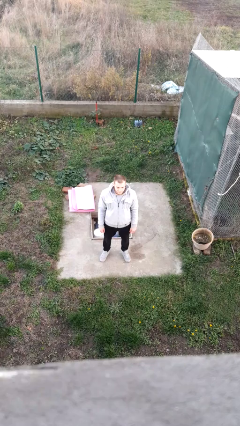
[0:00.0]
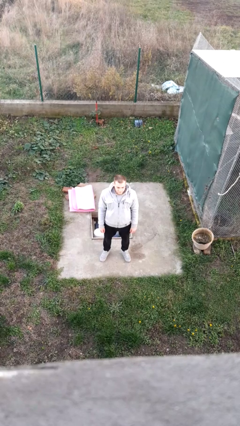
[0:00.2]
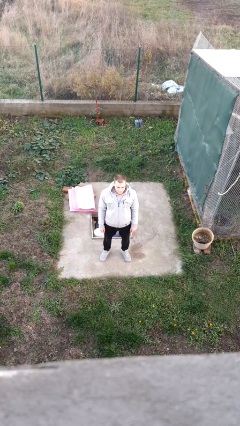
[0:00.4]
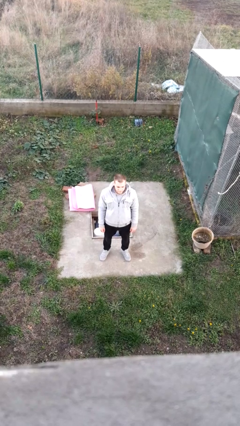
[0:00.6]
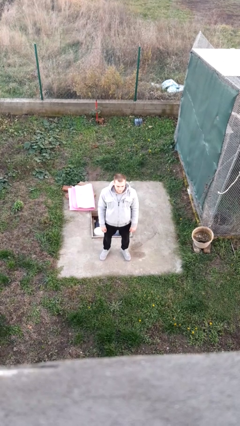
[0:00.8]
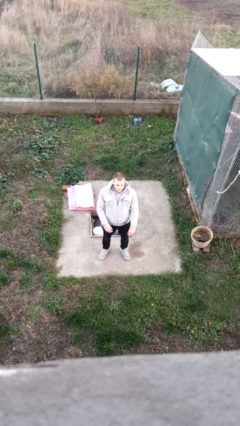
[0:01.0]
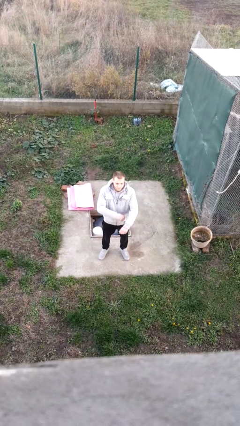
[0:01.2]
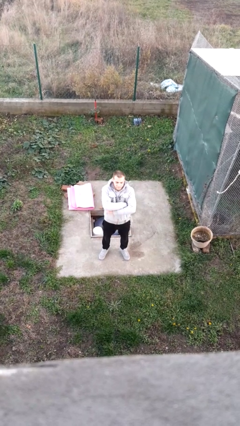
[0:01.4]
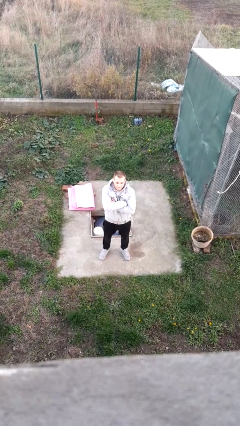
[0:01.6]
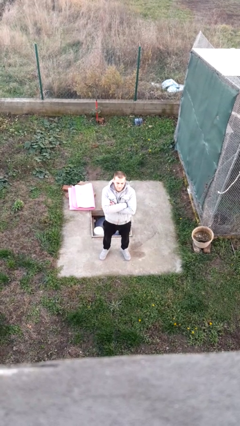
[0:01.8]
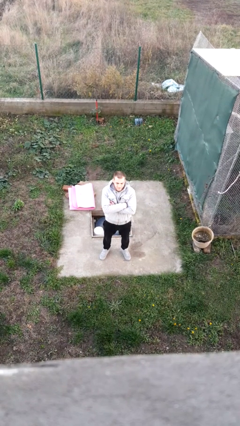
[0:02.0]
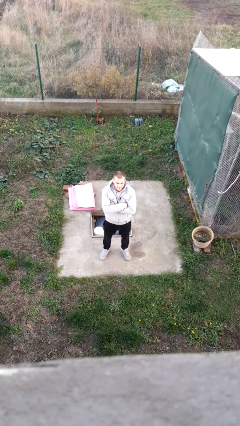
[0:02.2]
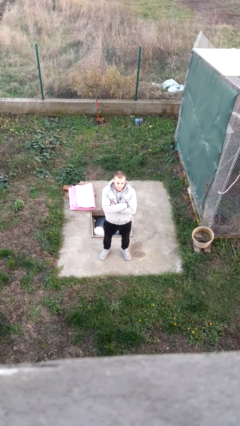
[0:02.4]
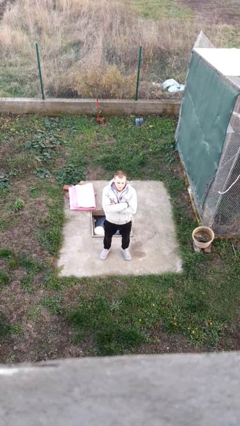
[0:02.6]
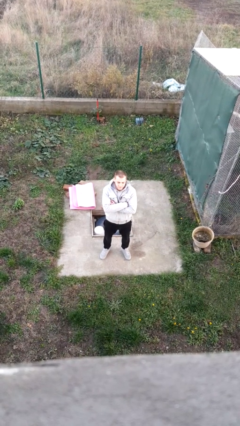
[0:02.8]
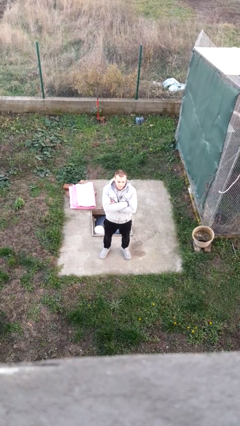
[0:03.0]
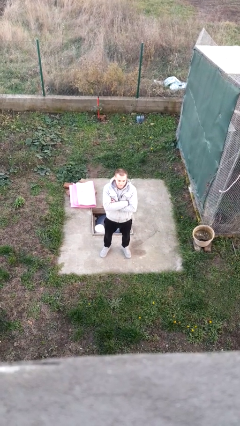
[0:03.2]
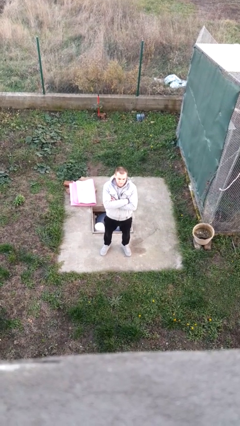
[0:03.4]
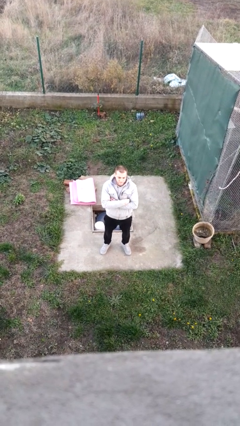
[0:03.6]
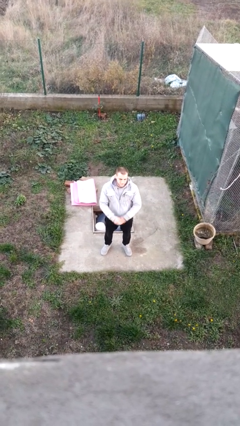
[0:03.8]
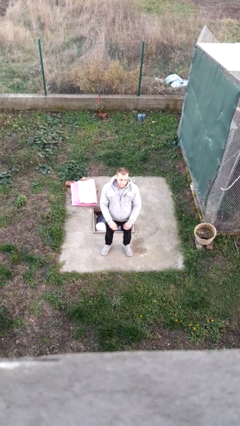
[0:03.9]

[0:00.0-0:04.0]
person crosses arms

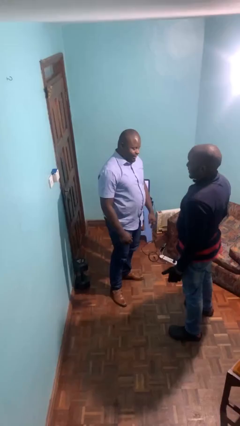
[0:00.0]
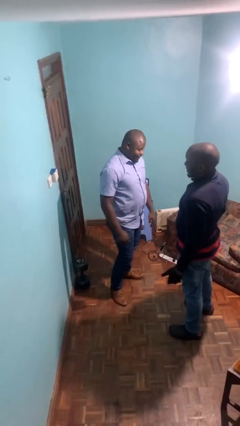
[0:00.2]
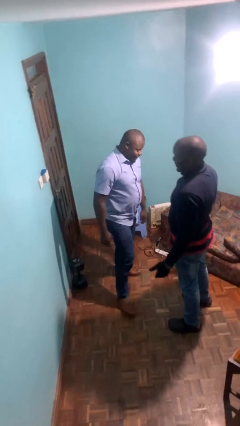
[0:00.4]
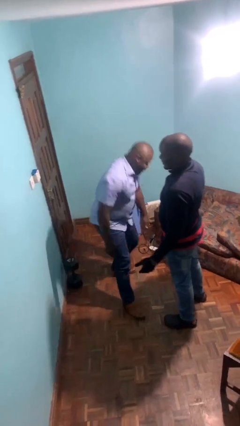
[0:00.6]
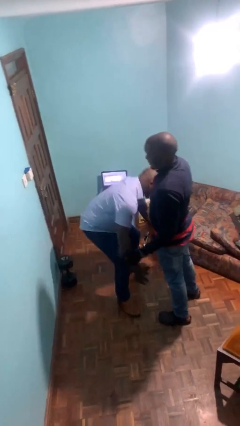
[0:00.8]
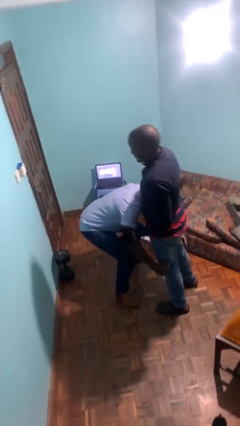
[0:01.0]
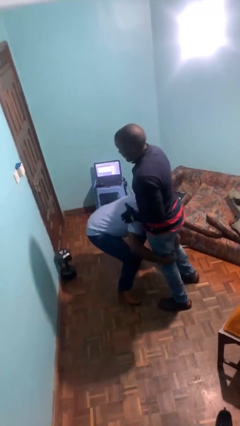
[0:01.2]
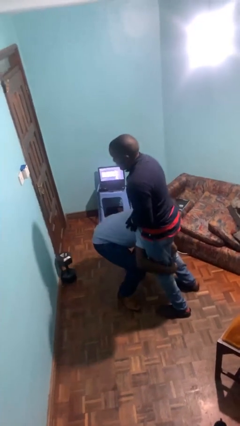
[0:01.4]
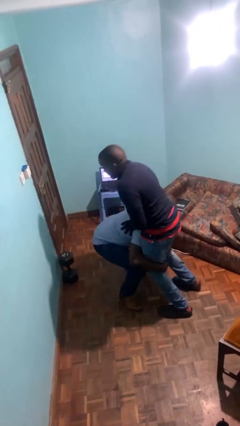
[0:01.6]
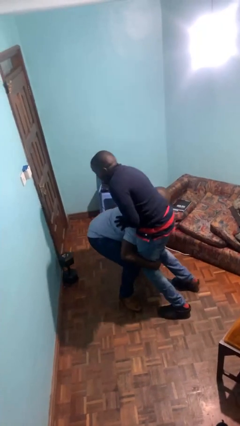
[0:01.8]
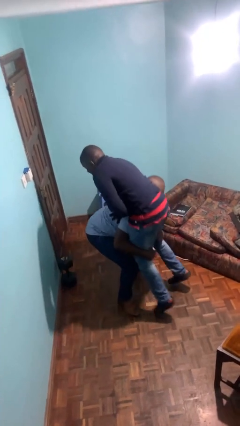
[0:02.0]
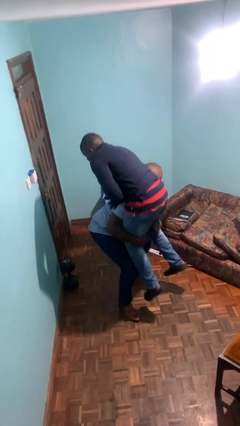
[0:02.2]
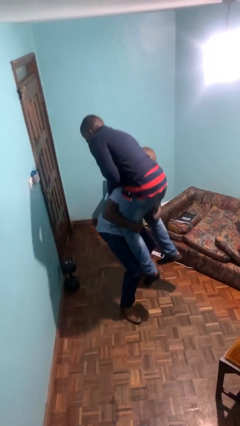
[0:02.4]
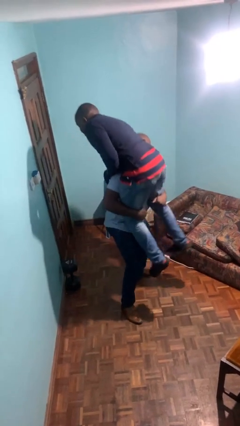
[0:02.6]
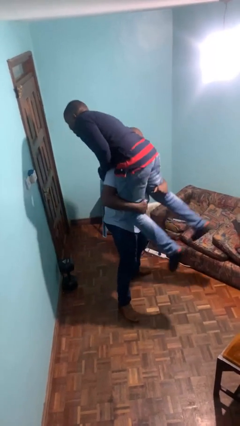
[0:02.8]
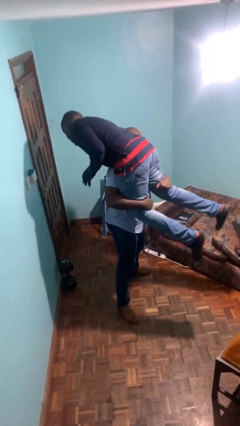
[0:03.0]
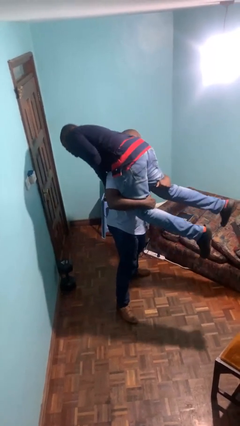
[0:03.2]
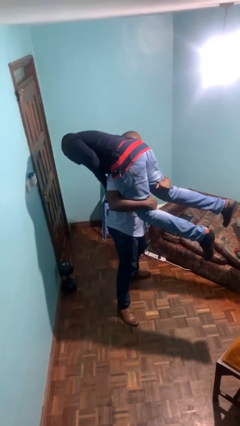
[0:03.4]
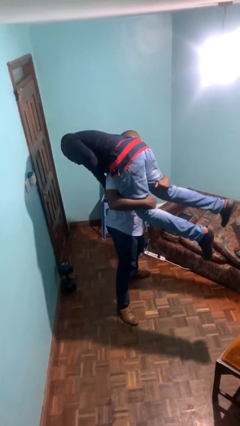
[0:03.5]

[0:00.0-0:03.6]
person carries person over shoulder

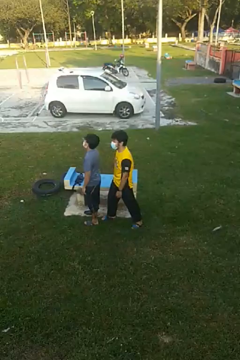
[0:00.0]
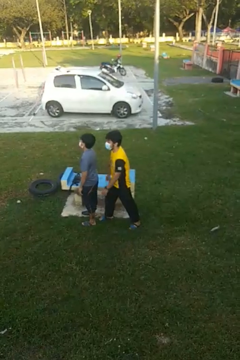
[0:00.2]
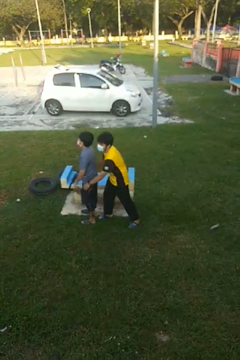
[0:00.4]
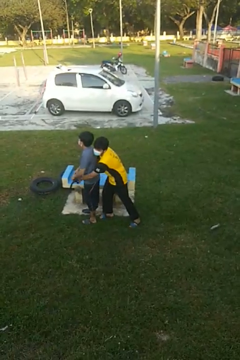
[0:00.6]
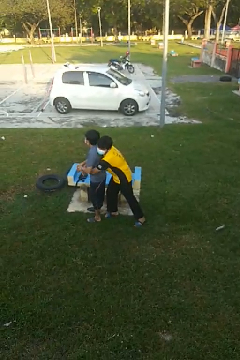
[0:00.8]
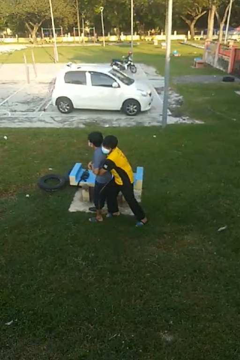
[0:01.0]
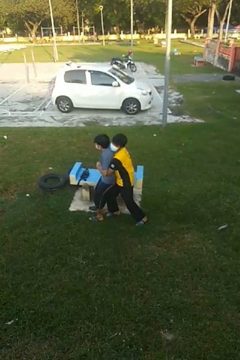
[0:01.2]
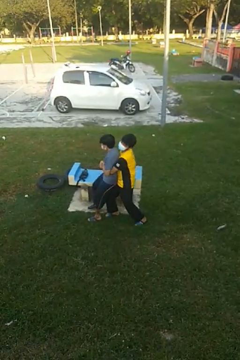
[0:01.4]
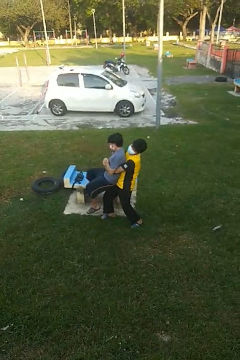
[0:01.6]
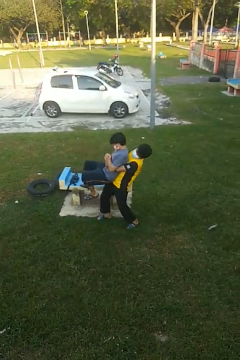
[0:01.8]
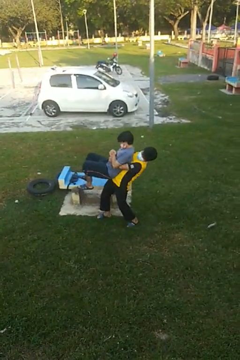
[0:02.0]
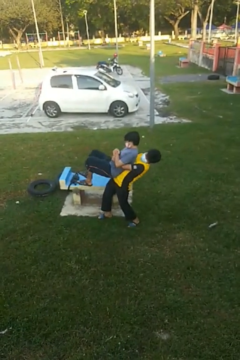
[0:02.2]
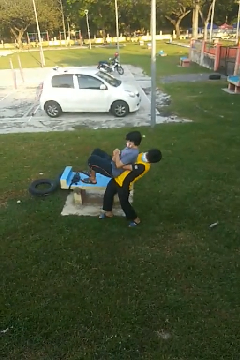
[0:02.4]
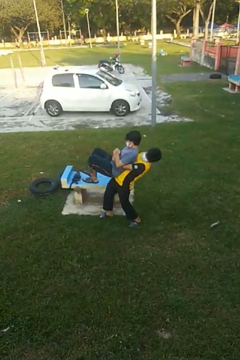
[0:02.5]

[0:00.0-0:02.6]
person picks up person

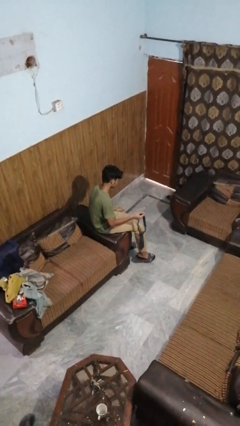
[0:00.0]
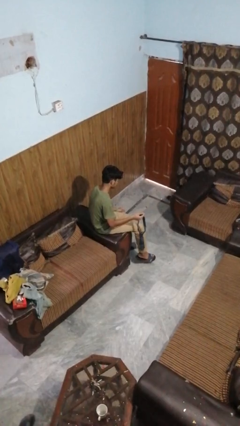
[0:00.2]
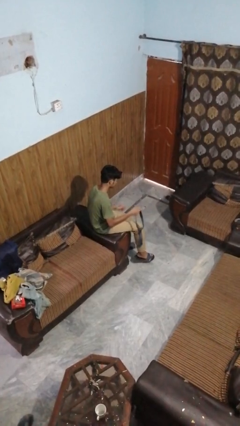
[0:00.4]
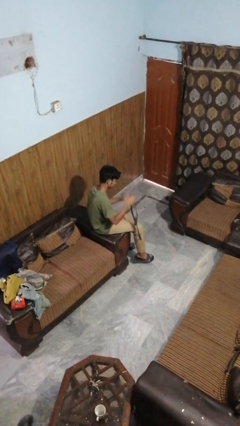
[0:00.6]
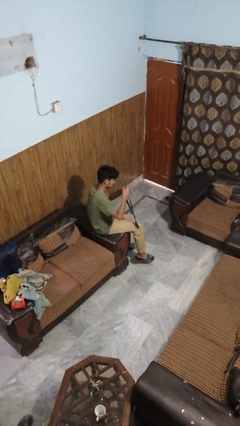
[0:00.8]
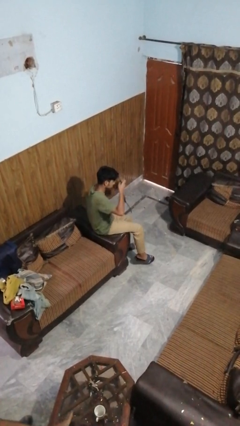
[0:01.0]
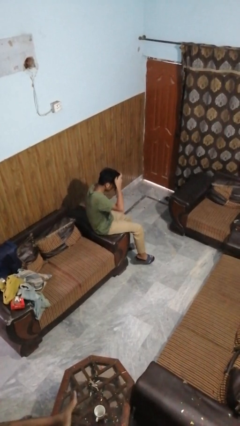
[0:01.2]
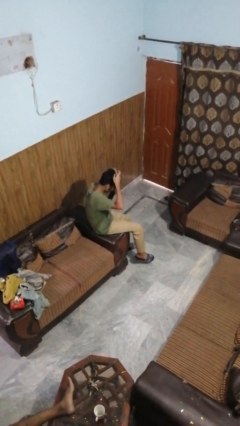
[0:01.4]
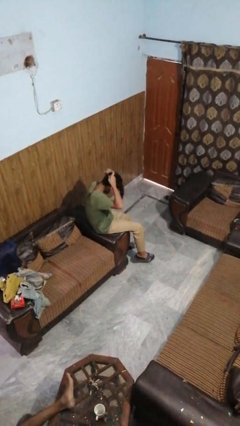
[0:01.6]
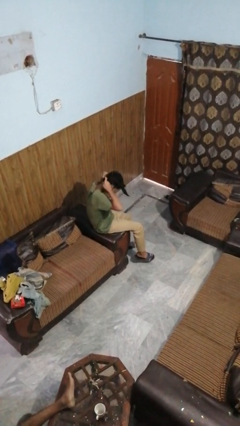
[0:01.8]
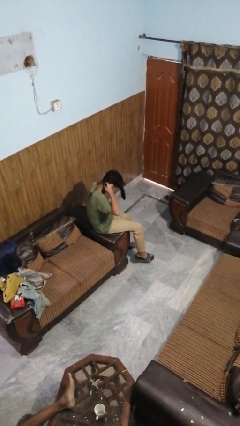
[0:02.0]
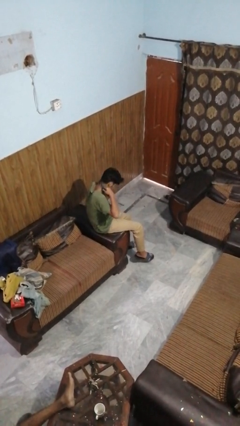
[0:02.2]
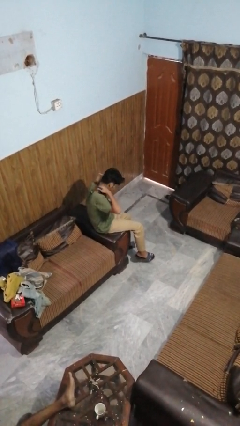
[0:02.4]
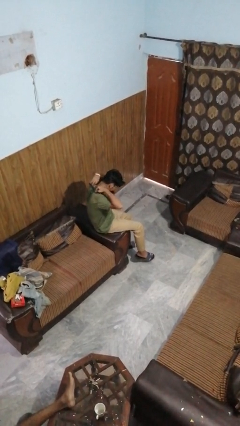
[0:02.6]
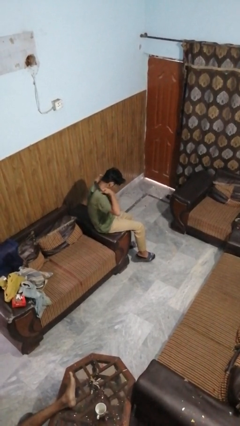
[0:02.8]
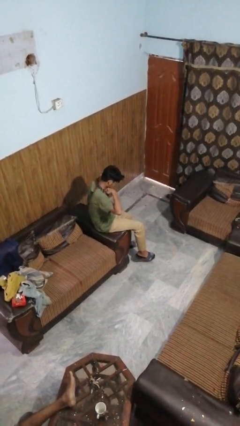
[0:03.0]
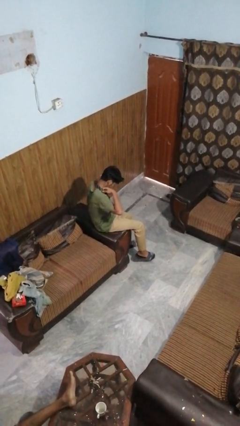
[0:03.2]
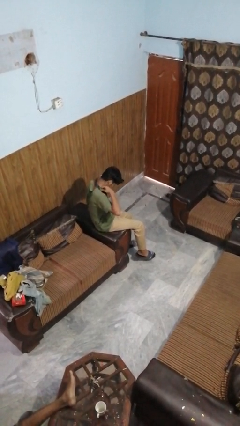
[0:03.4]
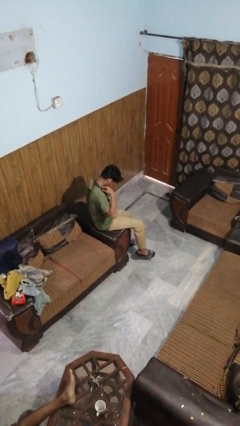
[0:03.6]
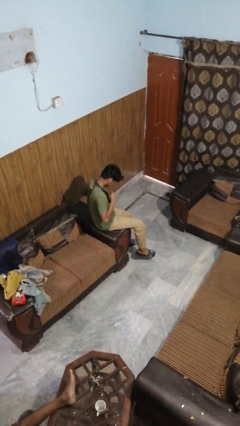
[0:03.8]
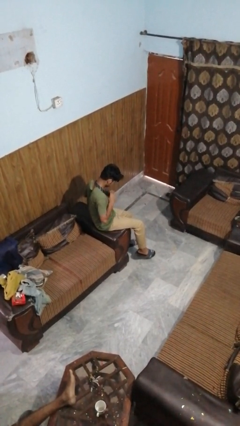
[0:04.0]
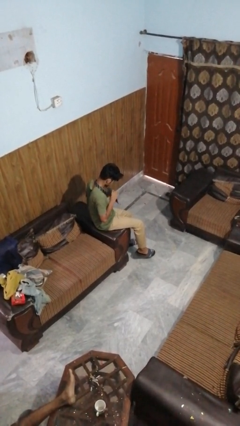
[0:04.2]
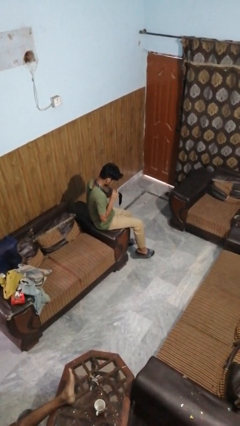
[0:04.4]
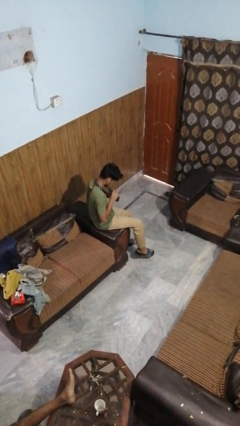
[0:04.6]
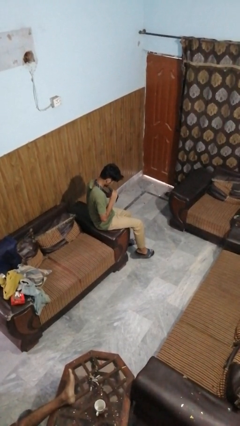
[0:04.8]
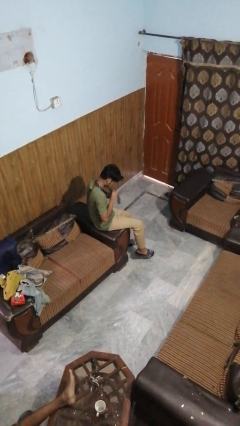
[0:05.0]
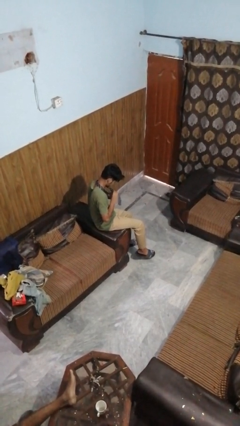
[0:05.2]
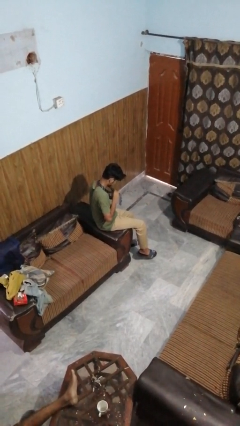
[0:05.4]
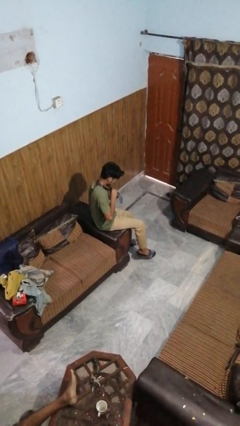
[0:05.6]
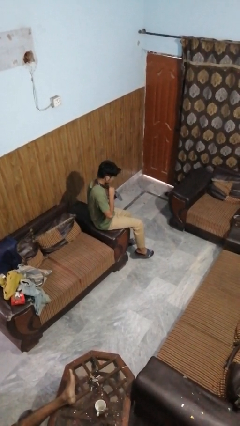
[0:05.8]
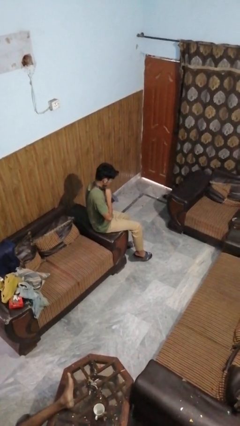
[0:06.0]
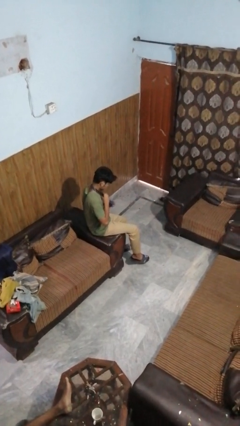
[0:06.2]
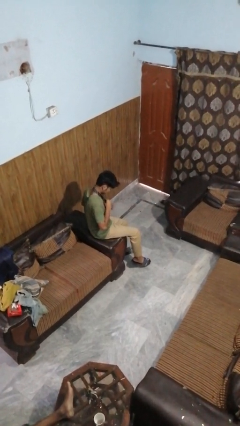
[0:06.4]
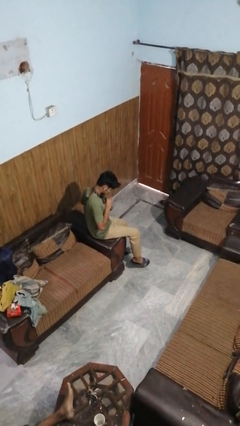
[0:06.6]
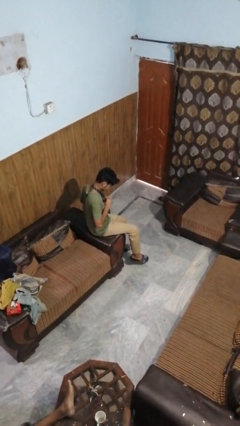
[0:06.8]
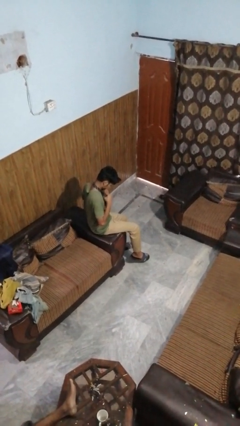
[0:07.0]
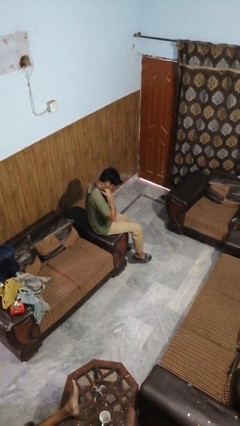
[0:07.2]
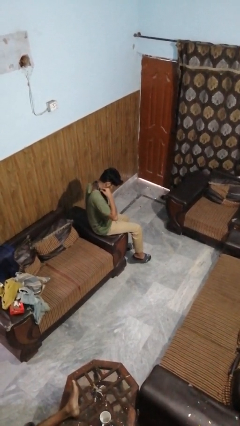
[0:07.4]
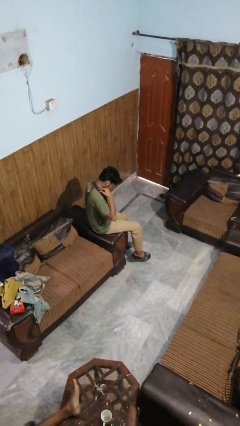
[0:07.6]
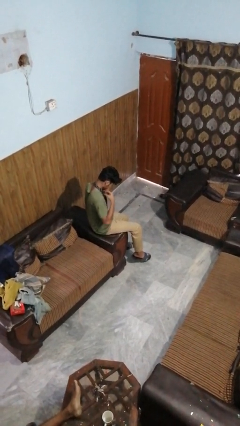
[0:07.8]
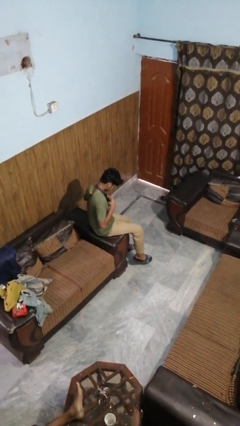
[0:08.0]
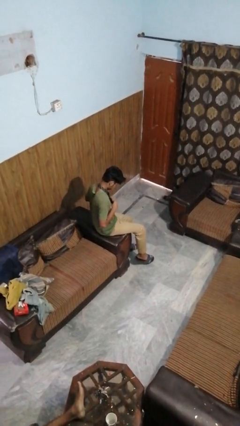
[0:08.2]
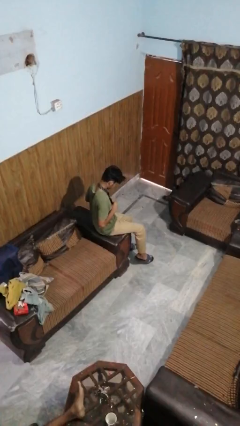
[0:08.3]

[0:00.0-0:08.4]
person puts on necktie
